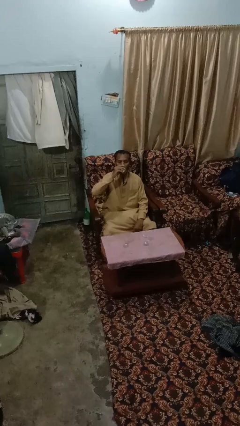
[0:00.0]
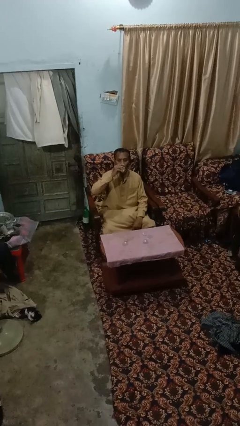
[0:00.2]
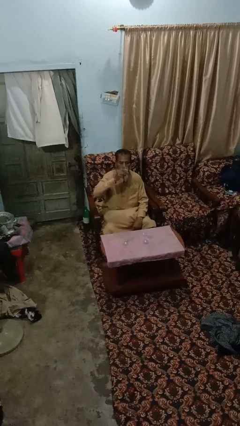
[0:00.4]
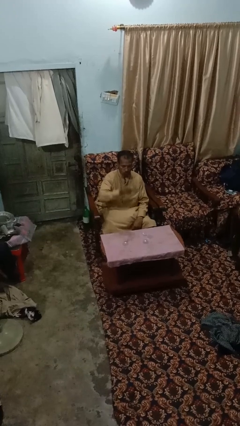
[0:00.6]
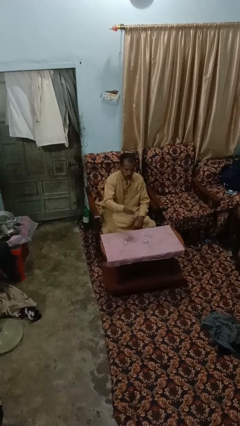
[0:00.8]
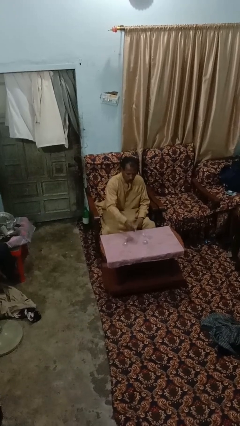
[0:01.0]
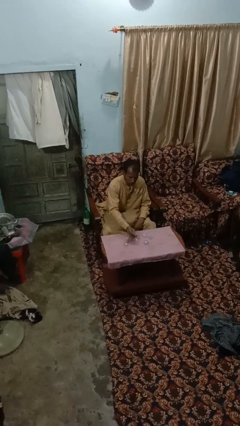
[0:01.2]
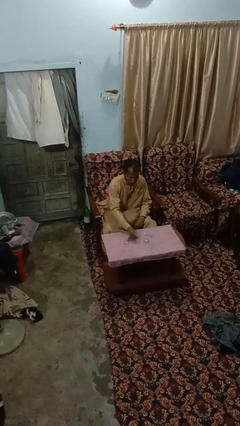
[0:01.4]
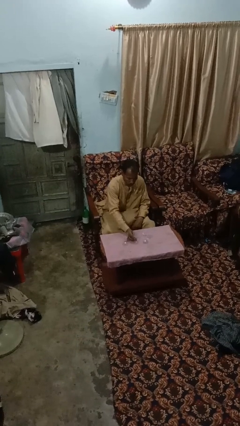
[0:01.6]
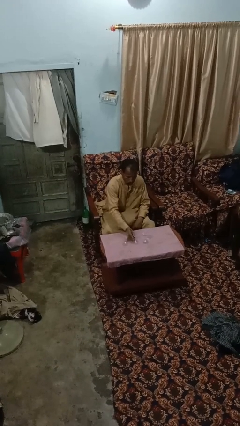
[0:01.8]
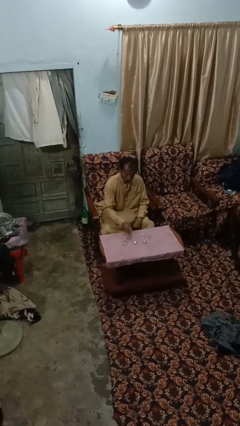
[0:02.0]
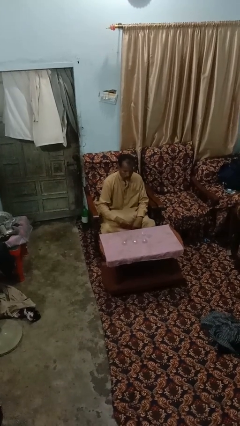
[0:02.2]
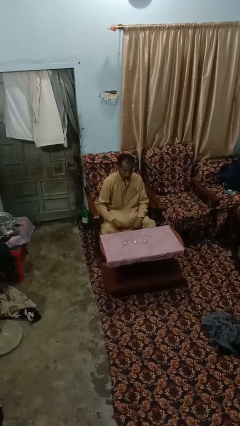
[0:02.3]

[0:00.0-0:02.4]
person puts down object on table

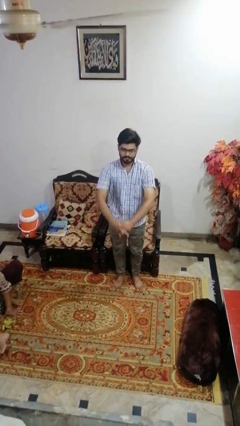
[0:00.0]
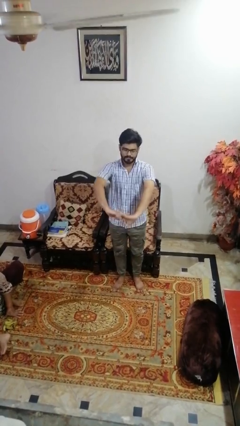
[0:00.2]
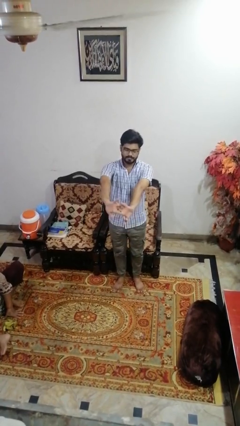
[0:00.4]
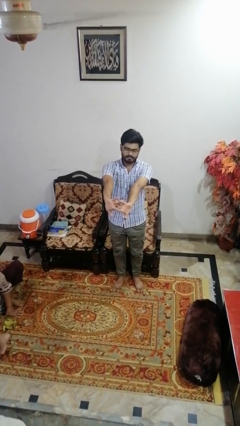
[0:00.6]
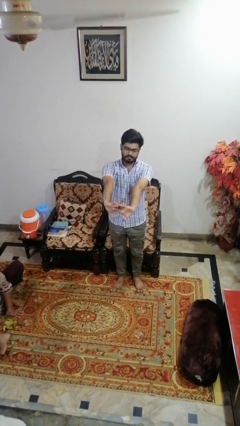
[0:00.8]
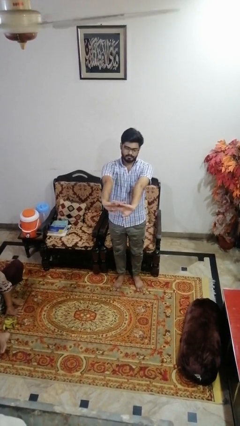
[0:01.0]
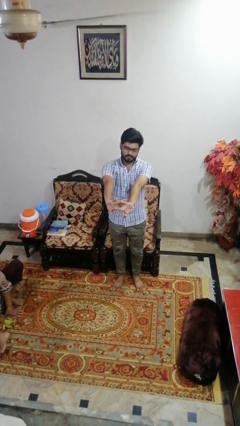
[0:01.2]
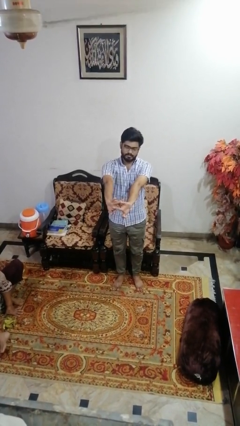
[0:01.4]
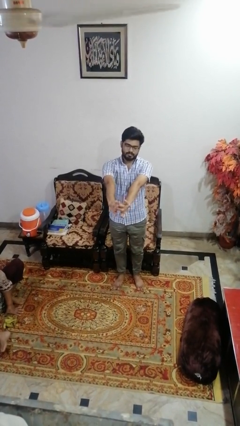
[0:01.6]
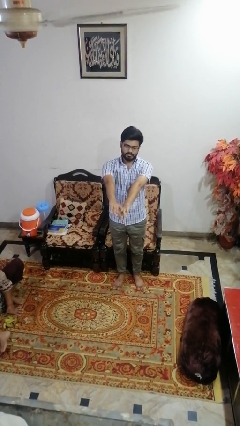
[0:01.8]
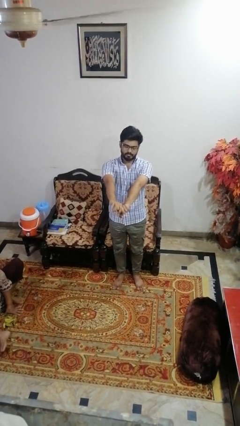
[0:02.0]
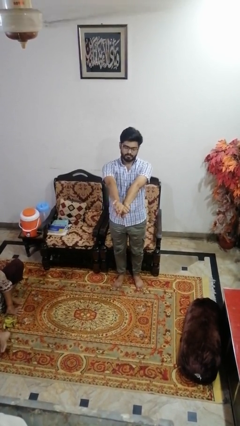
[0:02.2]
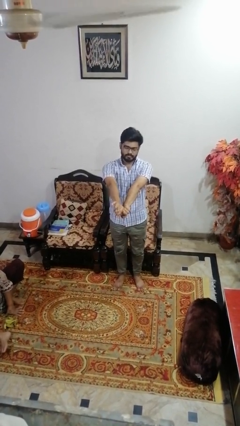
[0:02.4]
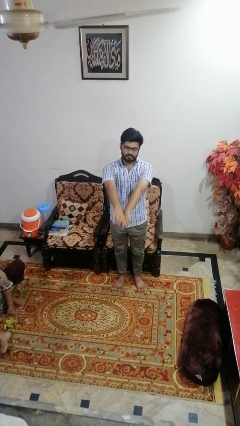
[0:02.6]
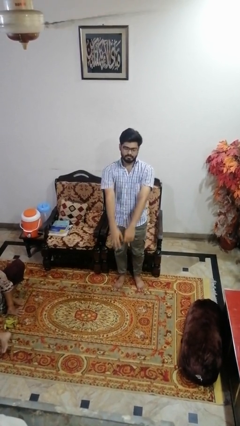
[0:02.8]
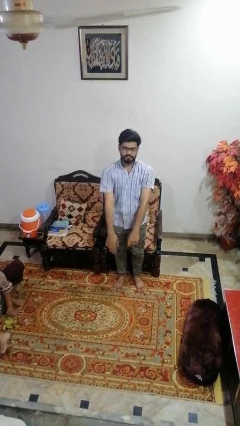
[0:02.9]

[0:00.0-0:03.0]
person cracks knuckles

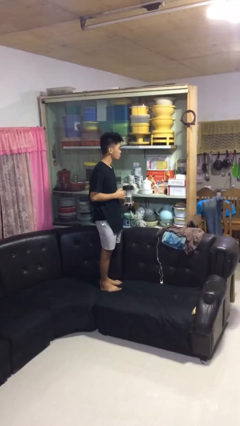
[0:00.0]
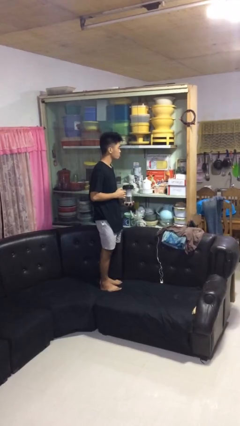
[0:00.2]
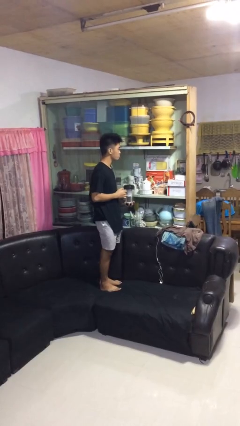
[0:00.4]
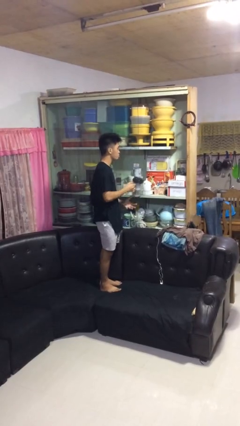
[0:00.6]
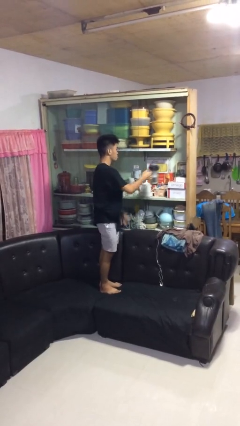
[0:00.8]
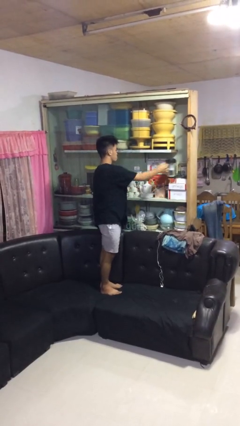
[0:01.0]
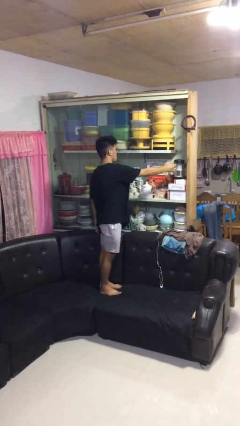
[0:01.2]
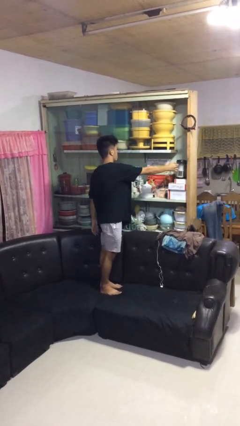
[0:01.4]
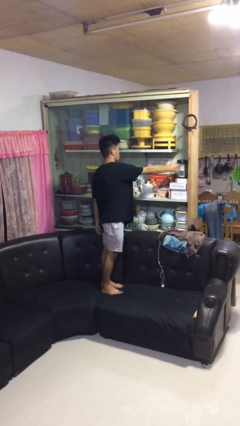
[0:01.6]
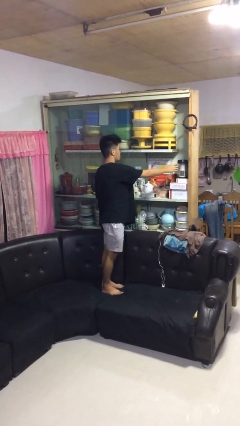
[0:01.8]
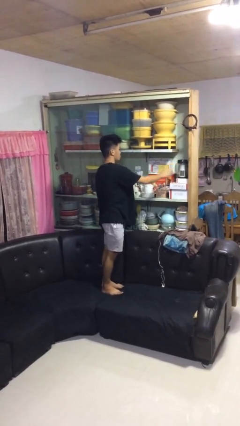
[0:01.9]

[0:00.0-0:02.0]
person puts down object into cabinet

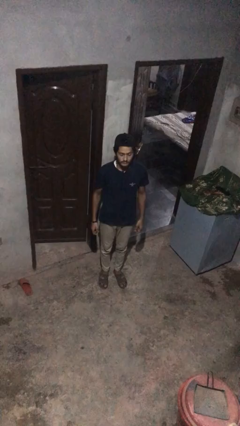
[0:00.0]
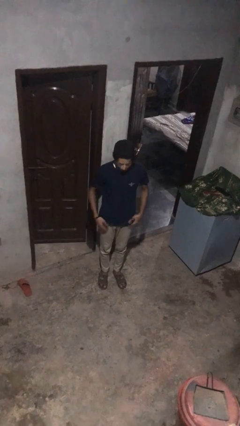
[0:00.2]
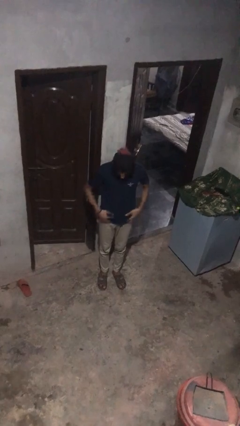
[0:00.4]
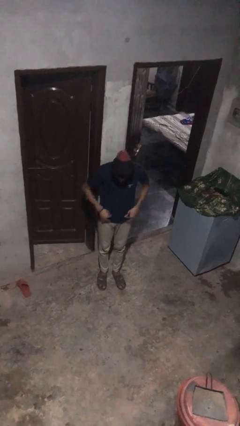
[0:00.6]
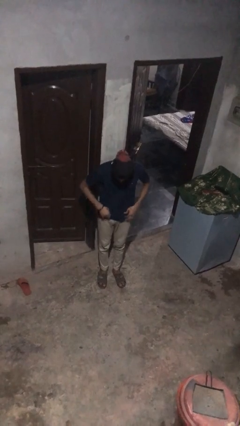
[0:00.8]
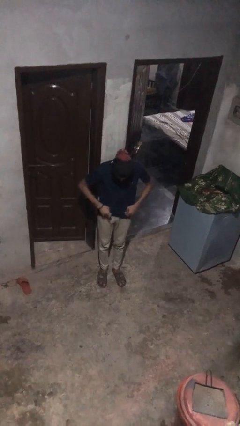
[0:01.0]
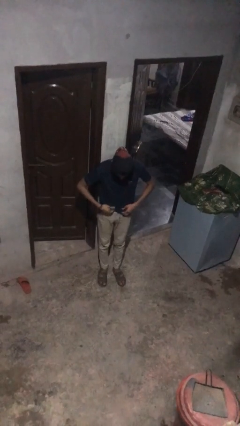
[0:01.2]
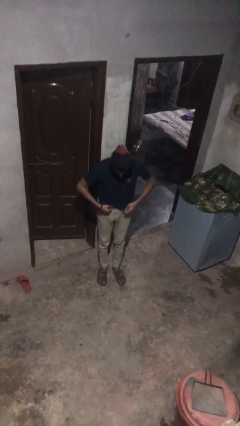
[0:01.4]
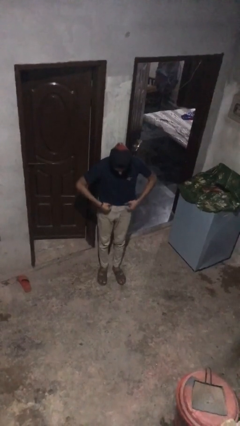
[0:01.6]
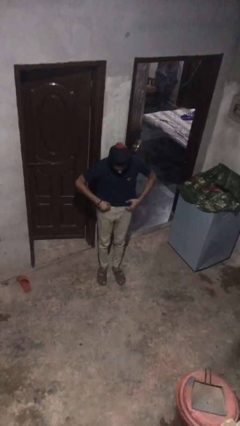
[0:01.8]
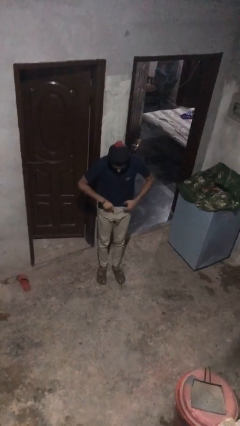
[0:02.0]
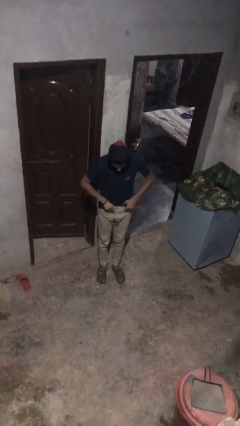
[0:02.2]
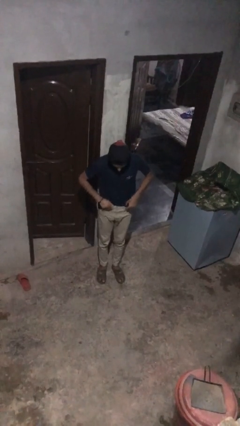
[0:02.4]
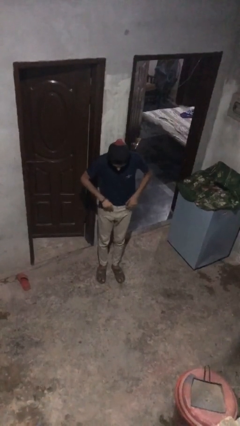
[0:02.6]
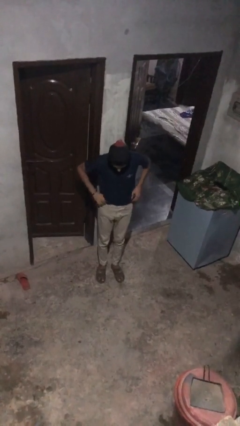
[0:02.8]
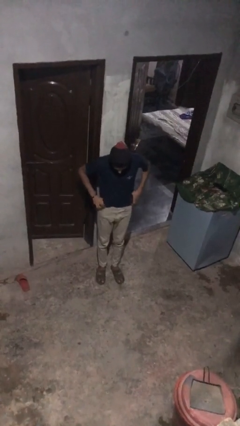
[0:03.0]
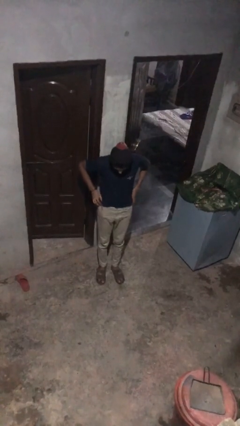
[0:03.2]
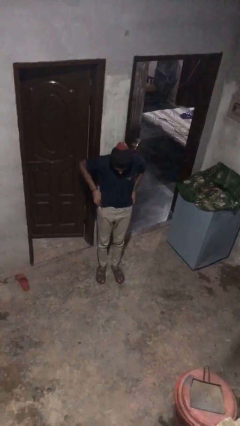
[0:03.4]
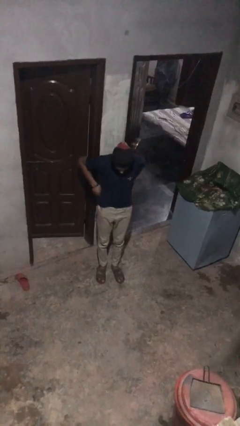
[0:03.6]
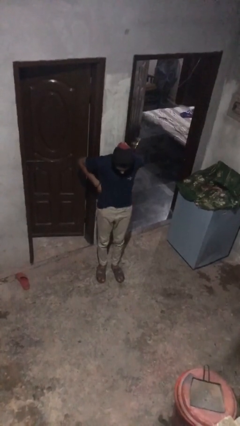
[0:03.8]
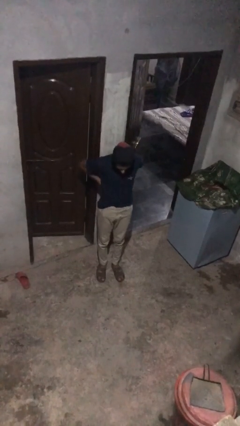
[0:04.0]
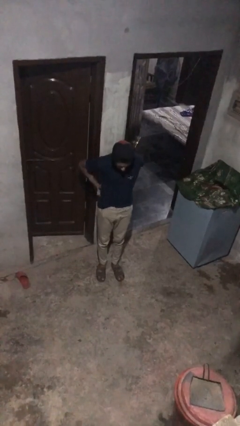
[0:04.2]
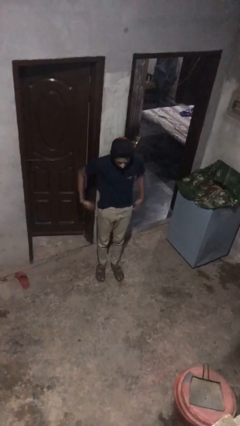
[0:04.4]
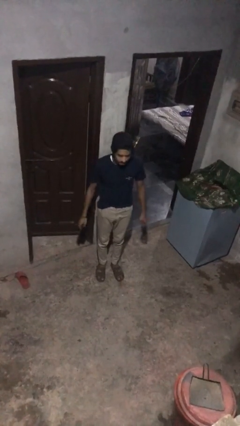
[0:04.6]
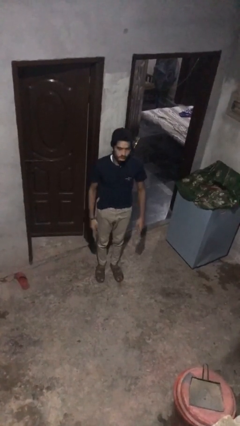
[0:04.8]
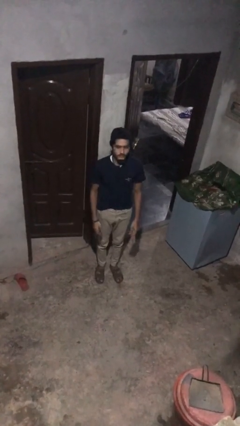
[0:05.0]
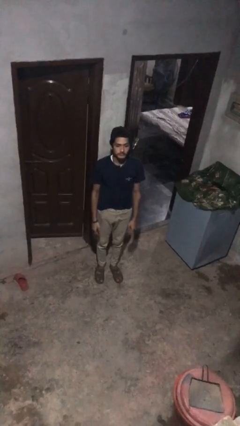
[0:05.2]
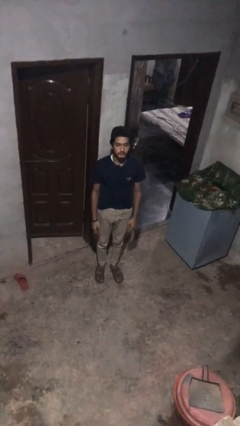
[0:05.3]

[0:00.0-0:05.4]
person tucks in shirt

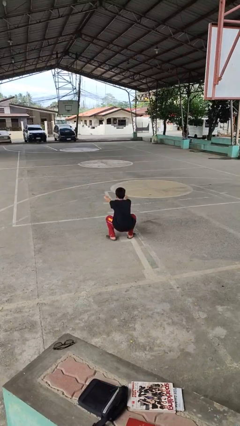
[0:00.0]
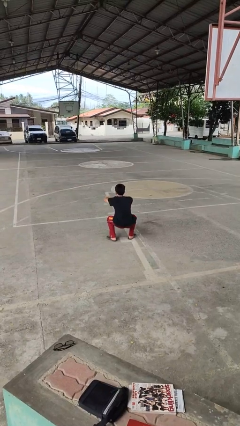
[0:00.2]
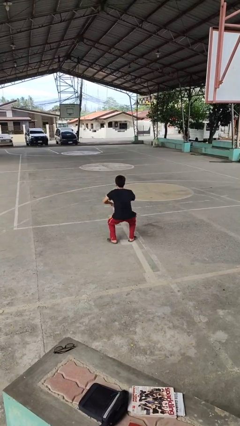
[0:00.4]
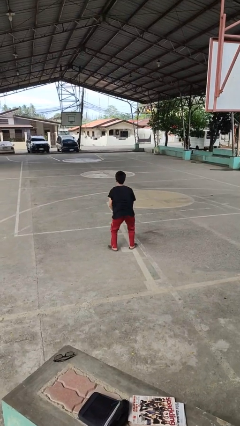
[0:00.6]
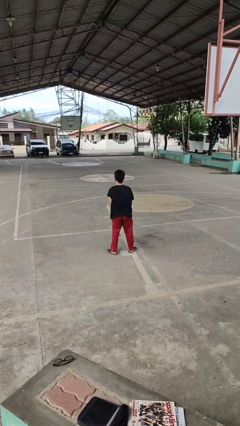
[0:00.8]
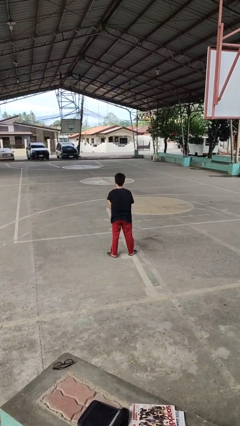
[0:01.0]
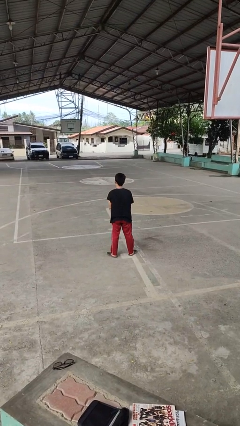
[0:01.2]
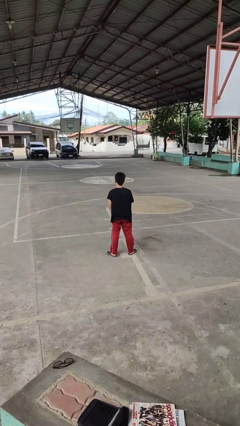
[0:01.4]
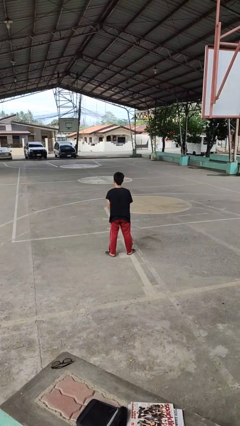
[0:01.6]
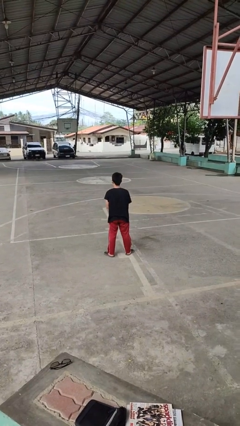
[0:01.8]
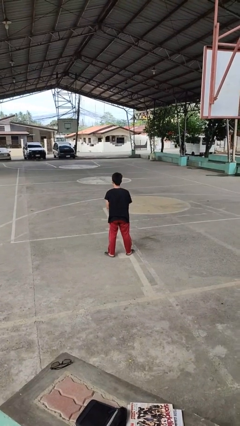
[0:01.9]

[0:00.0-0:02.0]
person stands up

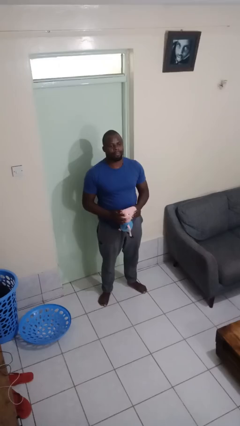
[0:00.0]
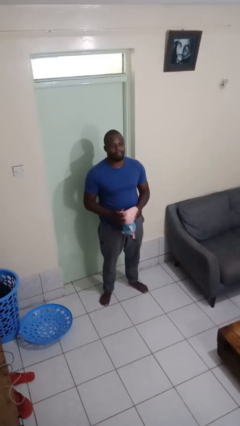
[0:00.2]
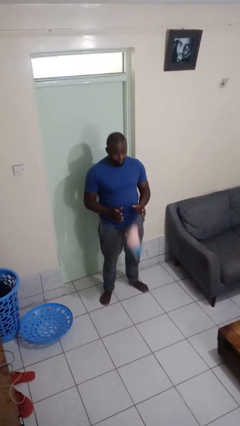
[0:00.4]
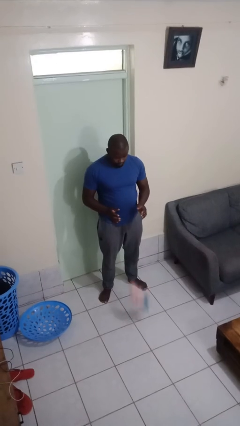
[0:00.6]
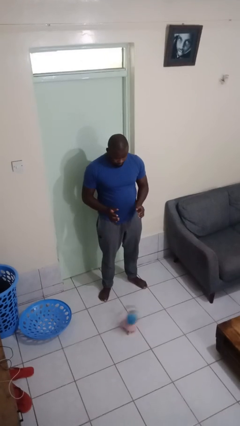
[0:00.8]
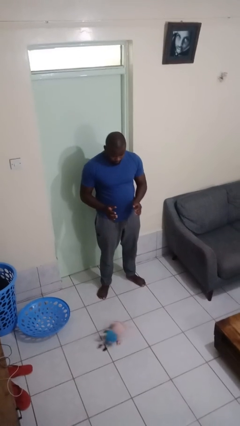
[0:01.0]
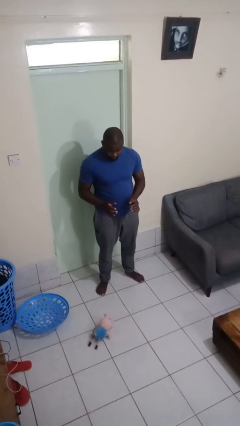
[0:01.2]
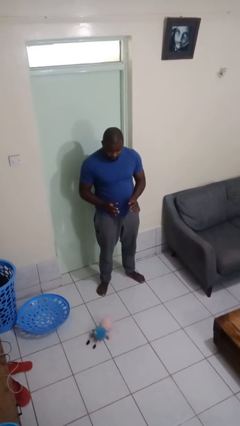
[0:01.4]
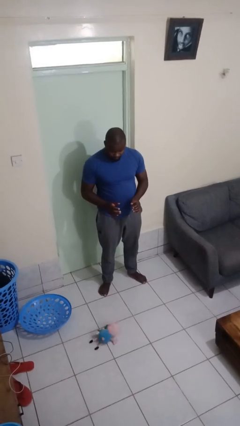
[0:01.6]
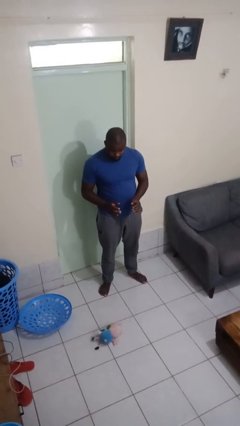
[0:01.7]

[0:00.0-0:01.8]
person drops object

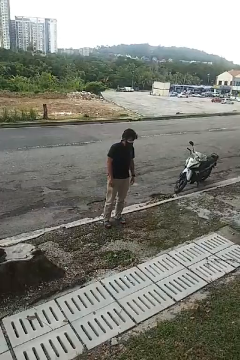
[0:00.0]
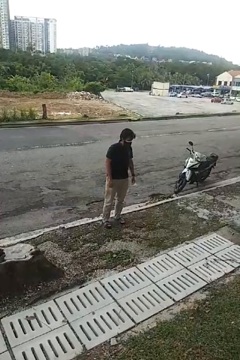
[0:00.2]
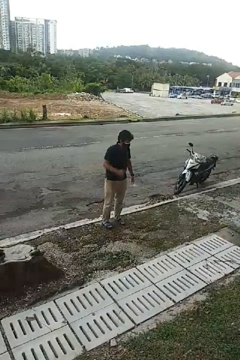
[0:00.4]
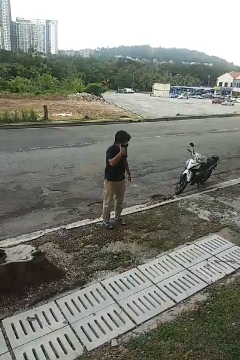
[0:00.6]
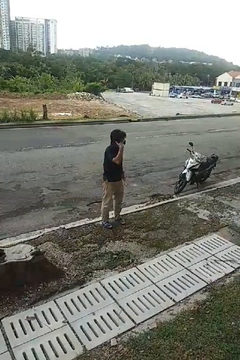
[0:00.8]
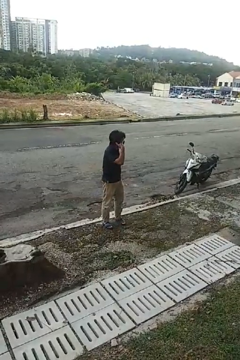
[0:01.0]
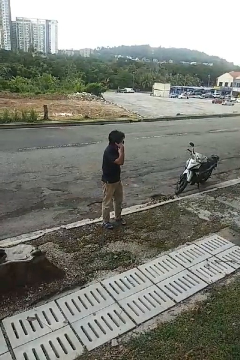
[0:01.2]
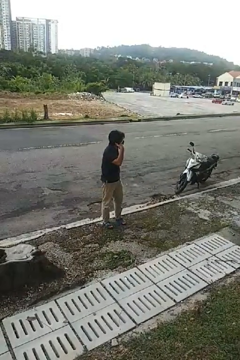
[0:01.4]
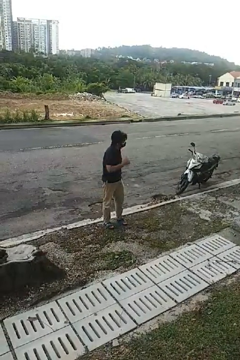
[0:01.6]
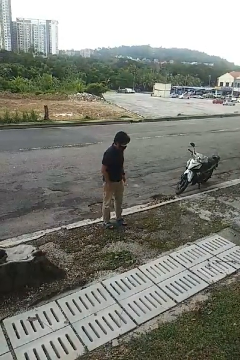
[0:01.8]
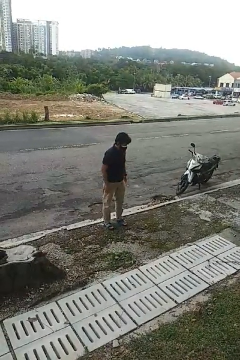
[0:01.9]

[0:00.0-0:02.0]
person gestures call me
